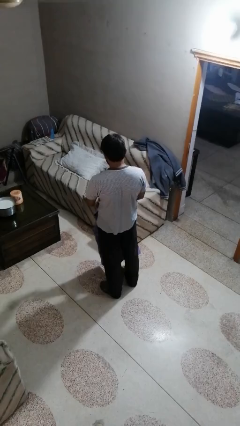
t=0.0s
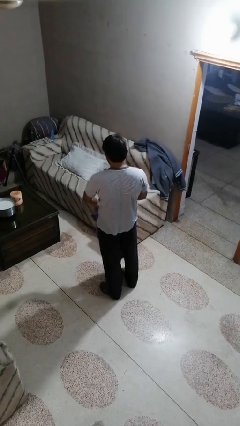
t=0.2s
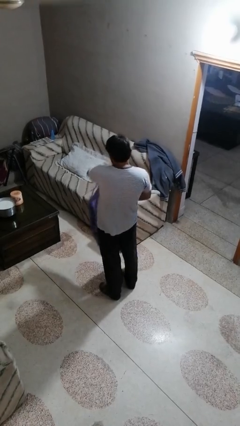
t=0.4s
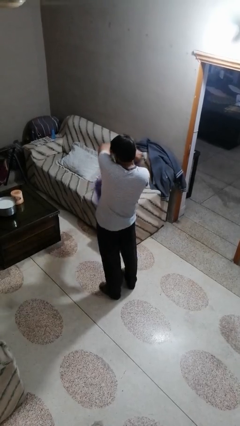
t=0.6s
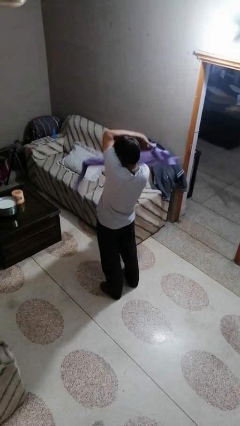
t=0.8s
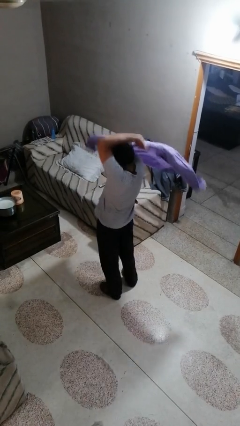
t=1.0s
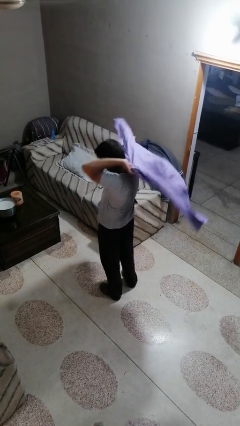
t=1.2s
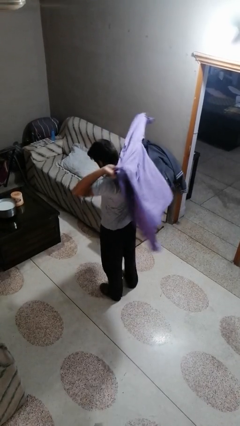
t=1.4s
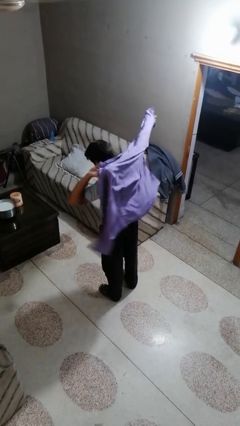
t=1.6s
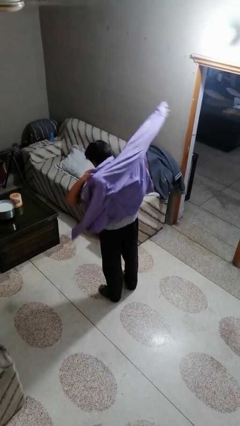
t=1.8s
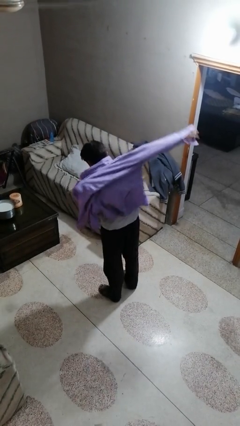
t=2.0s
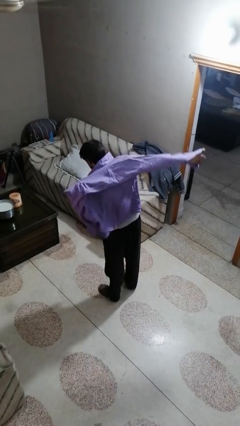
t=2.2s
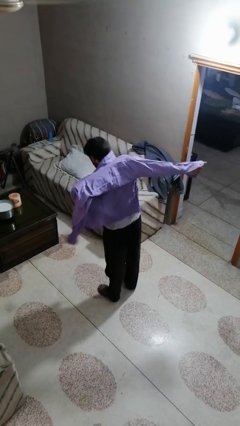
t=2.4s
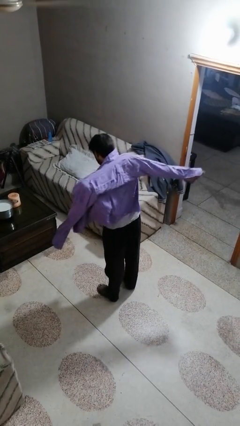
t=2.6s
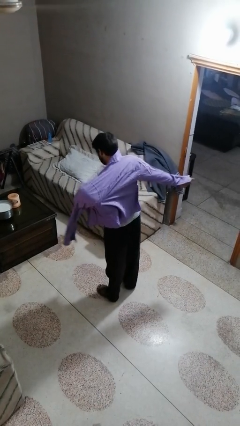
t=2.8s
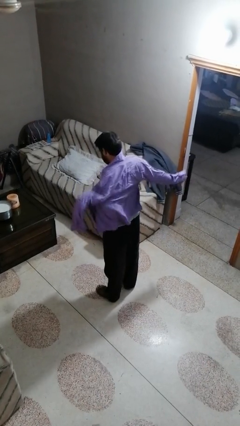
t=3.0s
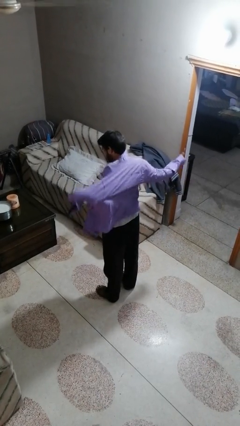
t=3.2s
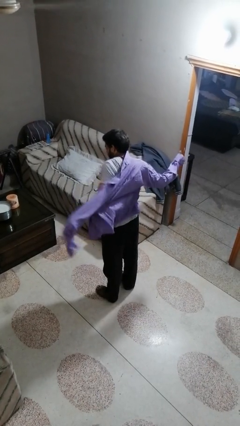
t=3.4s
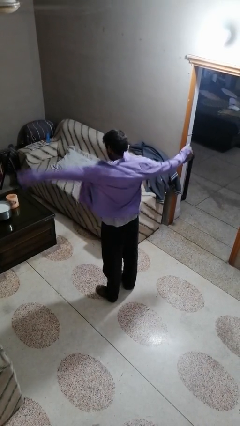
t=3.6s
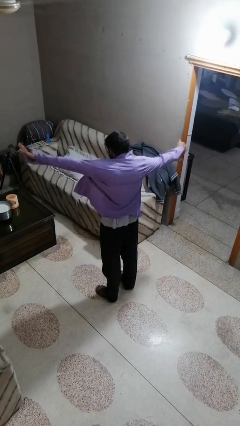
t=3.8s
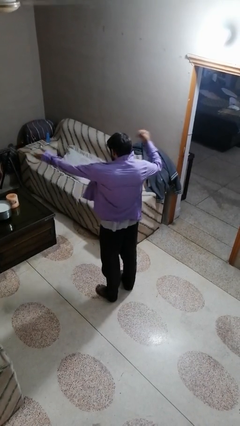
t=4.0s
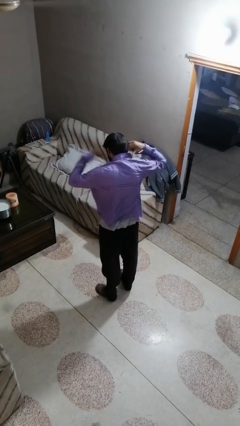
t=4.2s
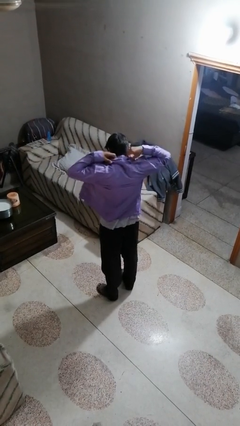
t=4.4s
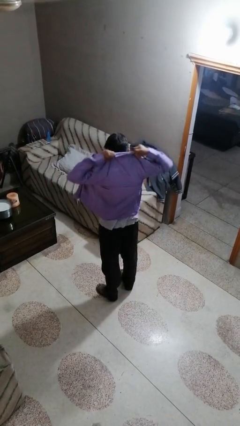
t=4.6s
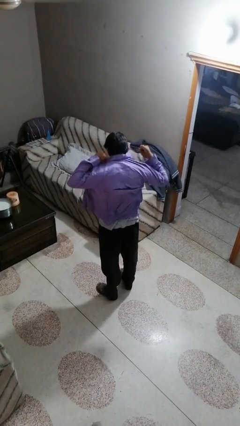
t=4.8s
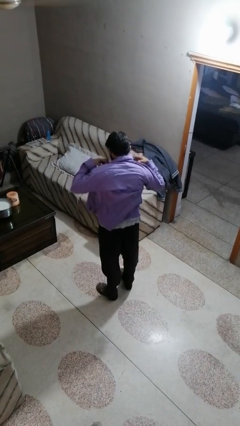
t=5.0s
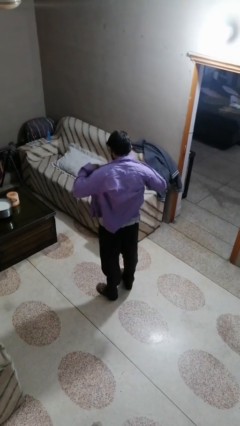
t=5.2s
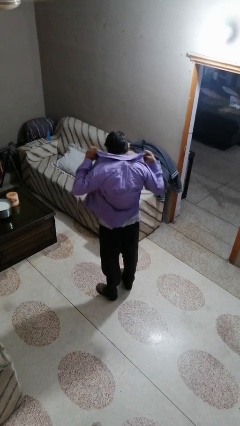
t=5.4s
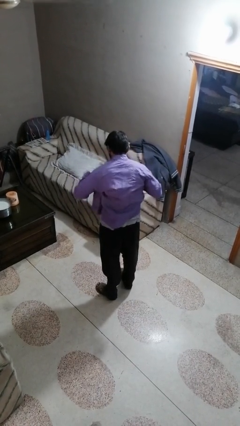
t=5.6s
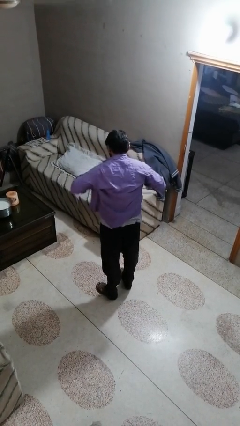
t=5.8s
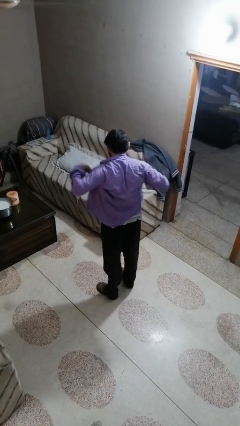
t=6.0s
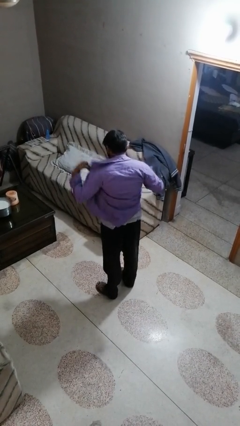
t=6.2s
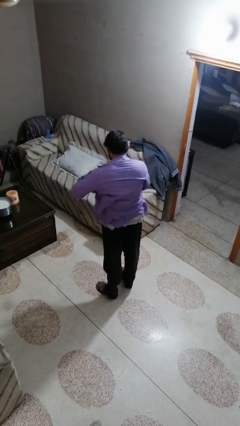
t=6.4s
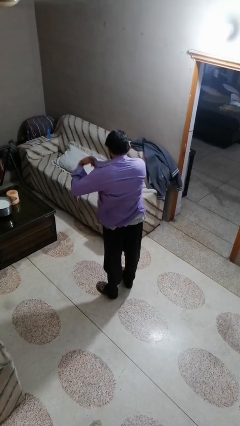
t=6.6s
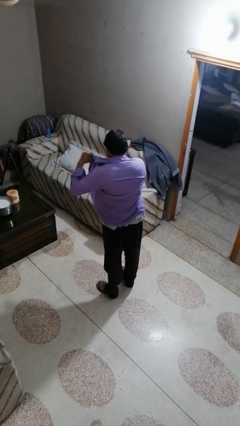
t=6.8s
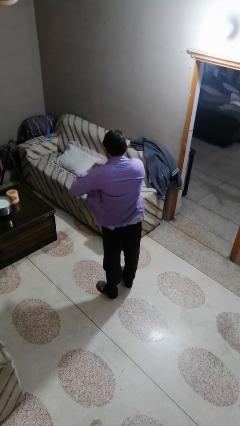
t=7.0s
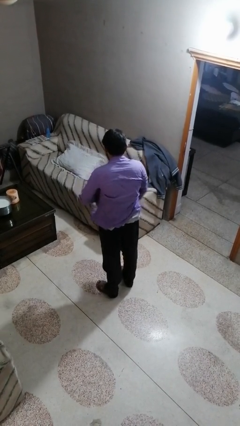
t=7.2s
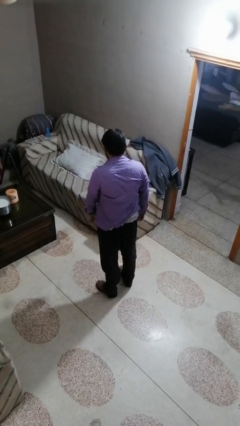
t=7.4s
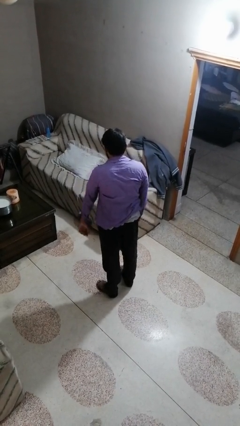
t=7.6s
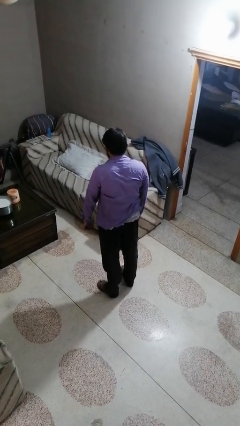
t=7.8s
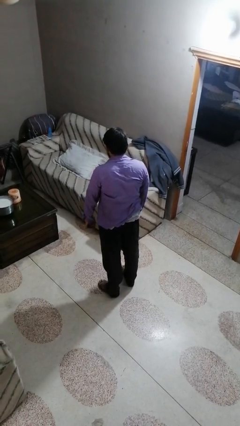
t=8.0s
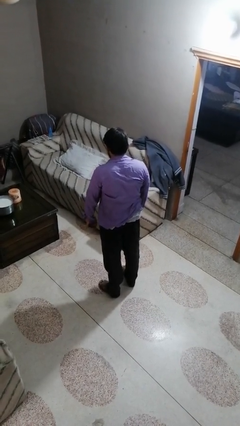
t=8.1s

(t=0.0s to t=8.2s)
person puts on shirt

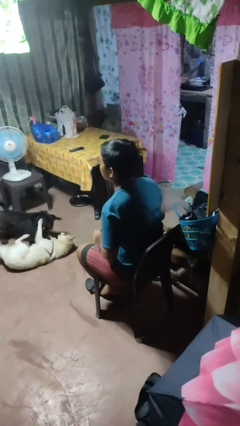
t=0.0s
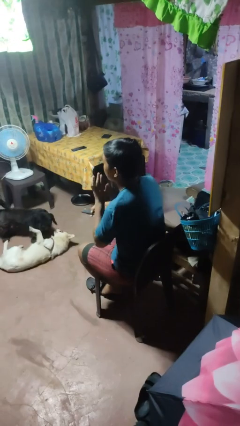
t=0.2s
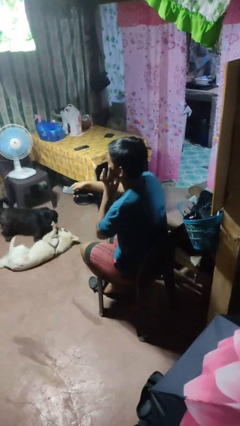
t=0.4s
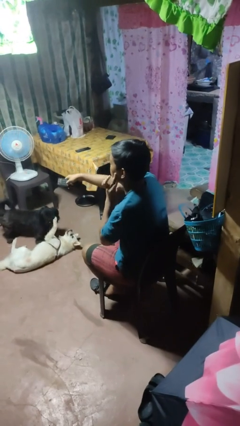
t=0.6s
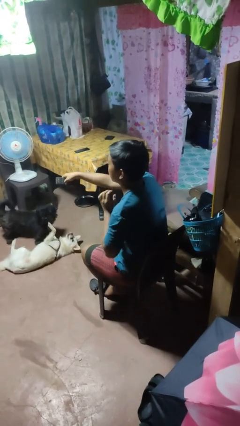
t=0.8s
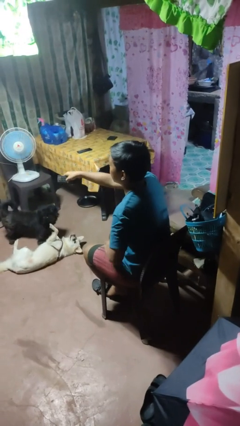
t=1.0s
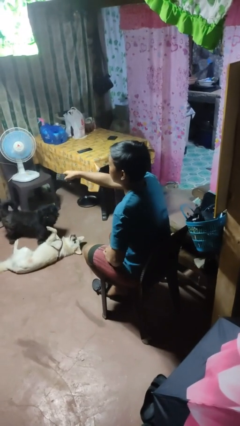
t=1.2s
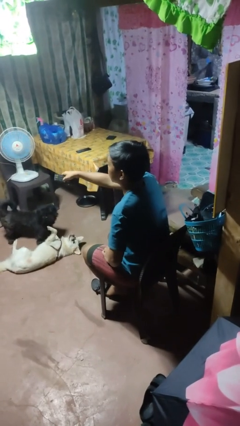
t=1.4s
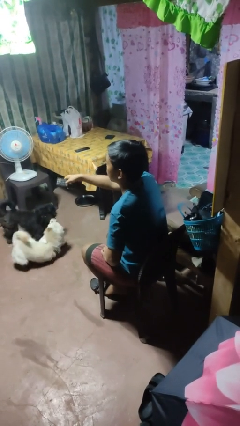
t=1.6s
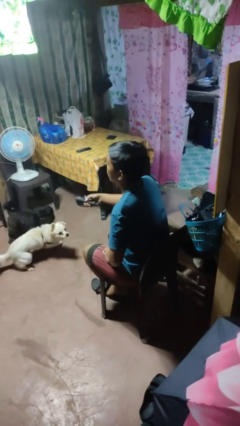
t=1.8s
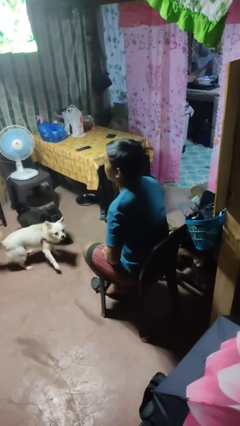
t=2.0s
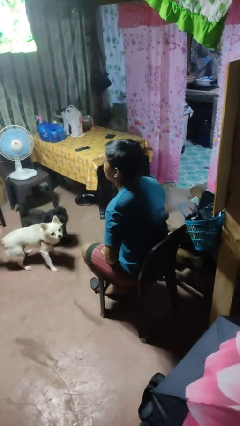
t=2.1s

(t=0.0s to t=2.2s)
person uses television remote

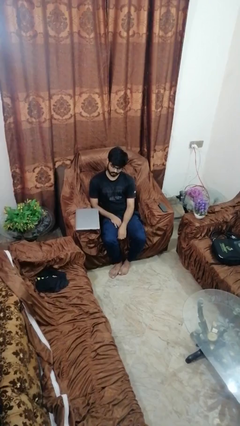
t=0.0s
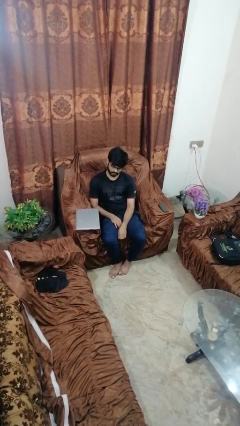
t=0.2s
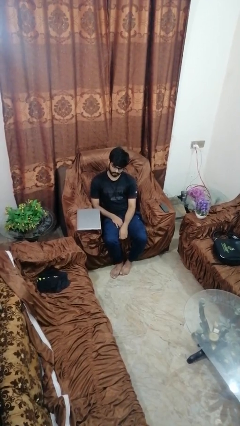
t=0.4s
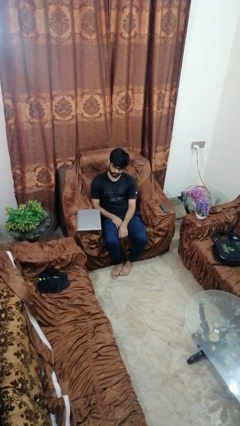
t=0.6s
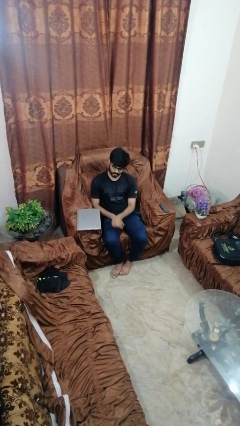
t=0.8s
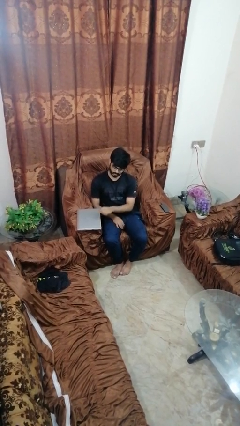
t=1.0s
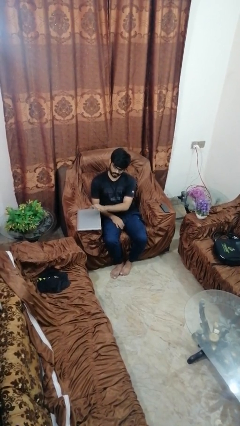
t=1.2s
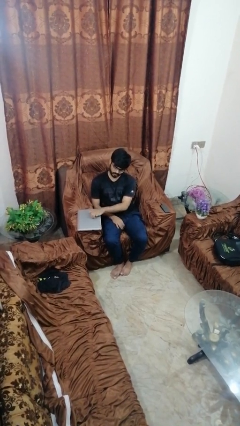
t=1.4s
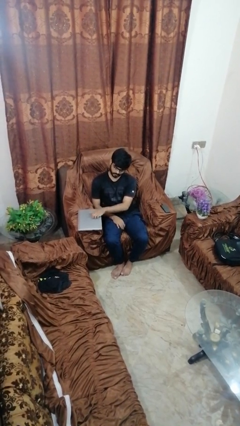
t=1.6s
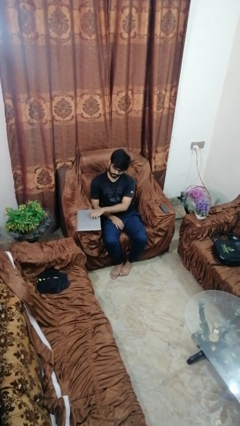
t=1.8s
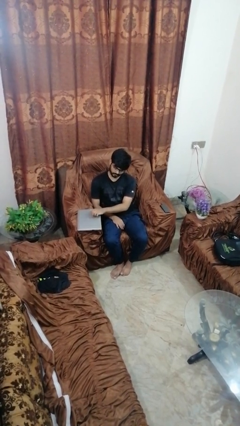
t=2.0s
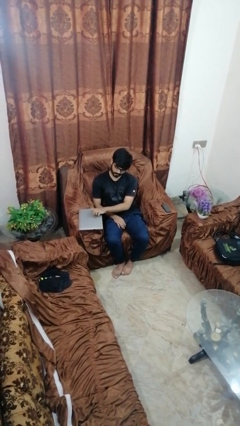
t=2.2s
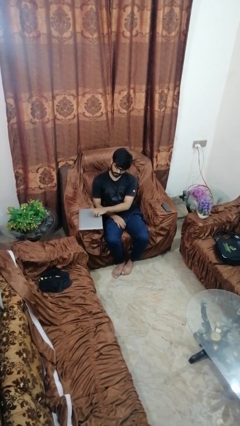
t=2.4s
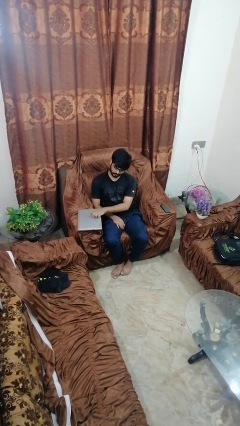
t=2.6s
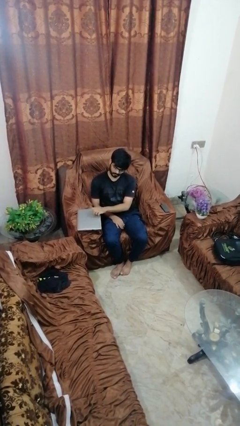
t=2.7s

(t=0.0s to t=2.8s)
person taps object with finger

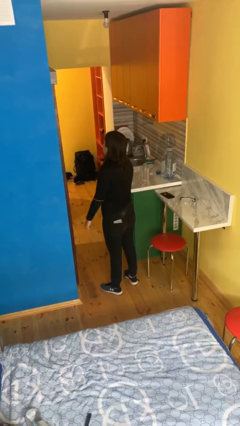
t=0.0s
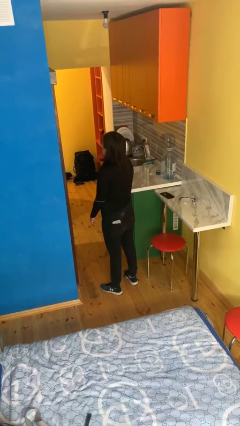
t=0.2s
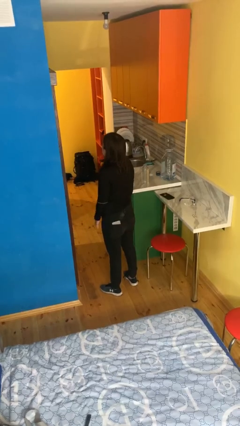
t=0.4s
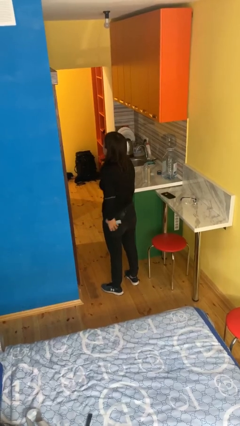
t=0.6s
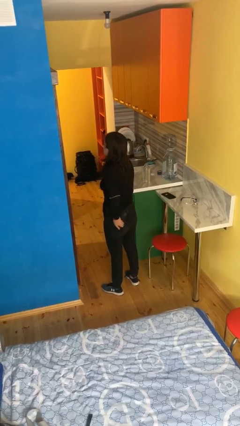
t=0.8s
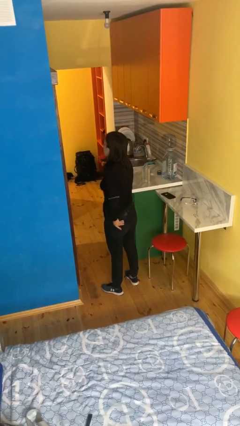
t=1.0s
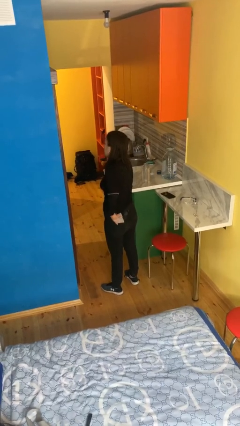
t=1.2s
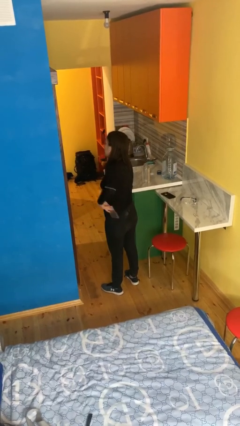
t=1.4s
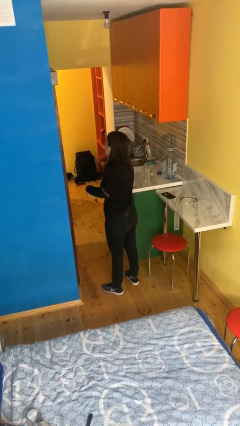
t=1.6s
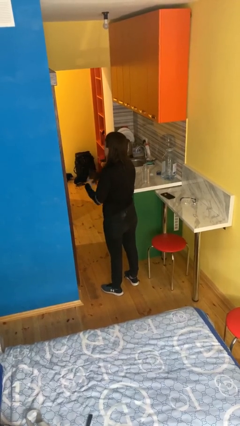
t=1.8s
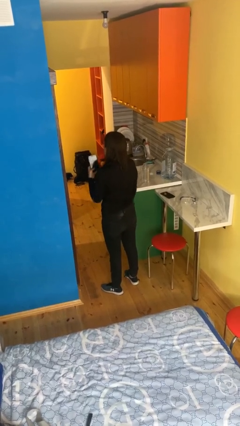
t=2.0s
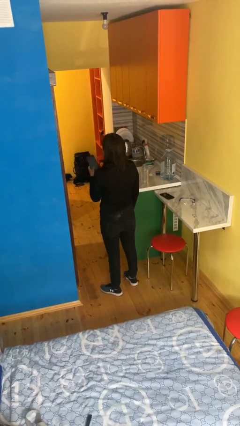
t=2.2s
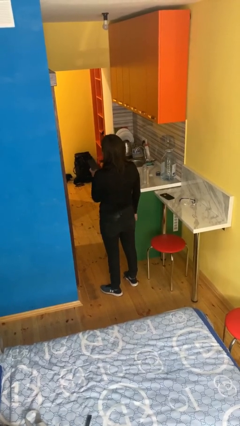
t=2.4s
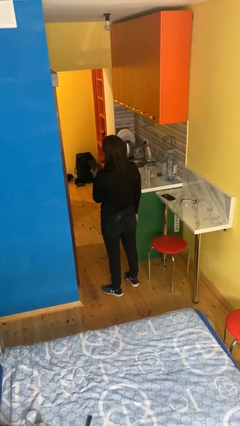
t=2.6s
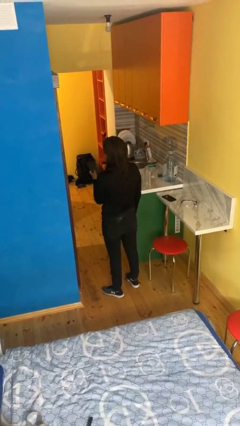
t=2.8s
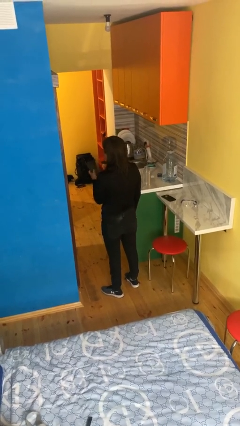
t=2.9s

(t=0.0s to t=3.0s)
person takes phone from pocket

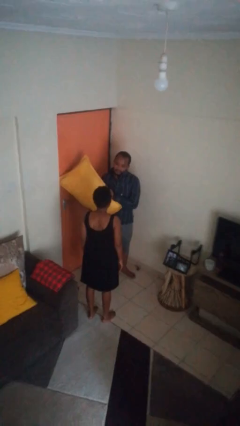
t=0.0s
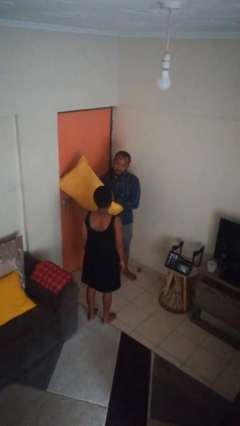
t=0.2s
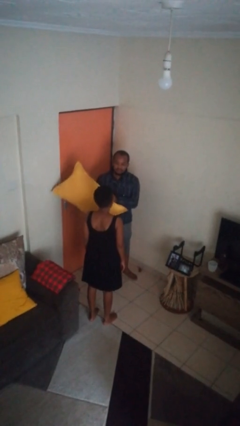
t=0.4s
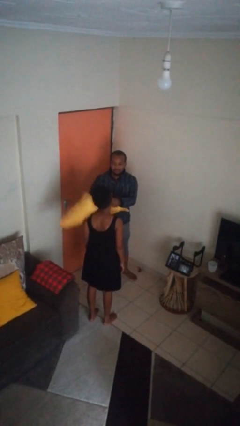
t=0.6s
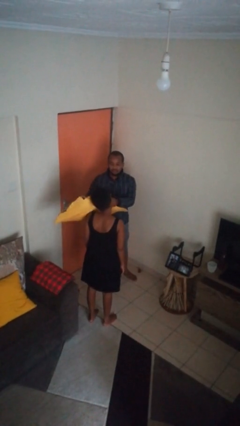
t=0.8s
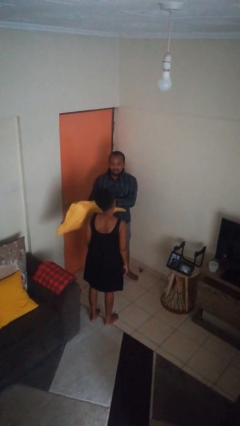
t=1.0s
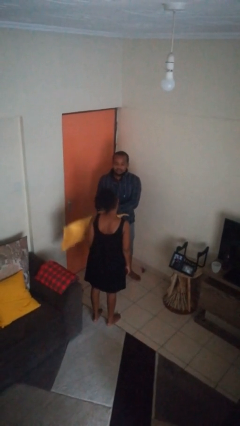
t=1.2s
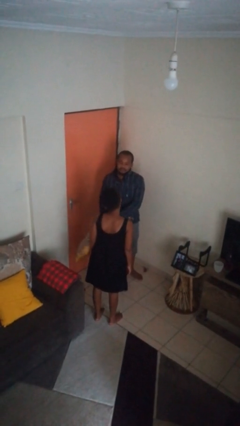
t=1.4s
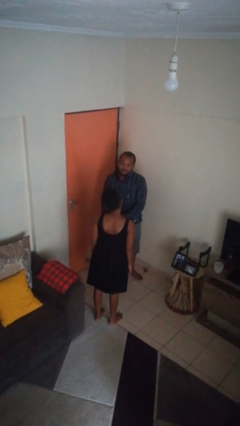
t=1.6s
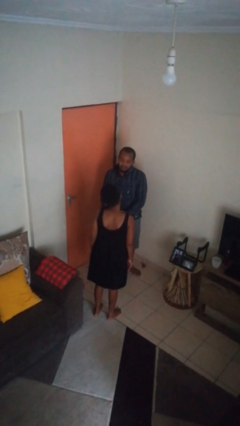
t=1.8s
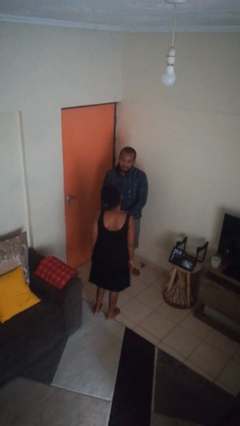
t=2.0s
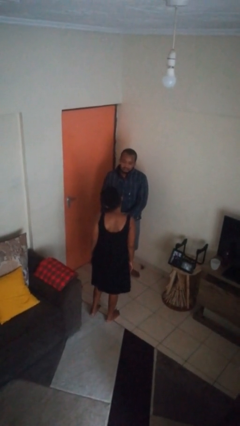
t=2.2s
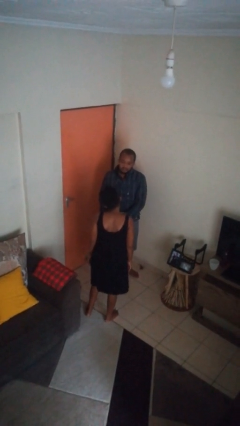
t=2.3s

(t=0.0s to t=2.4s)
person hits person with pillow
